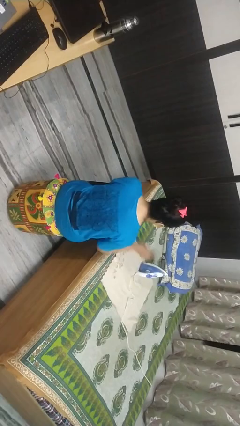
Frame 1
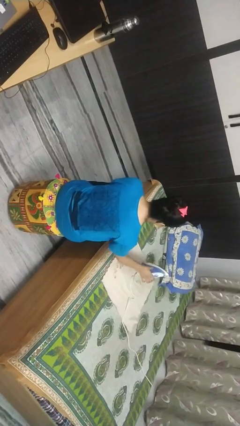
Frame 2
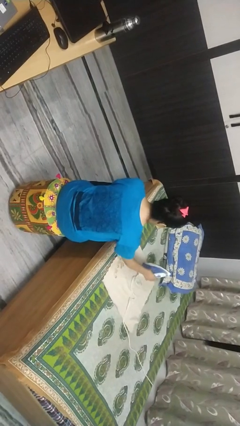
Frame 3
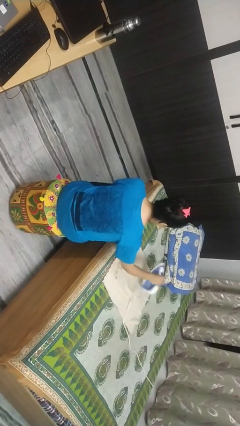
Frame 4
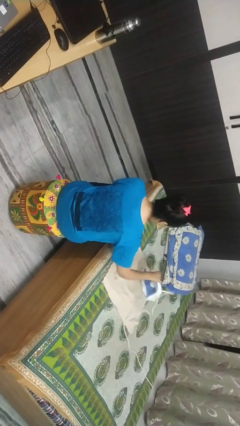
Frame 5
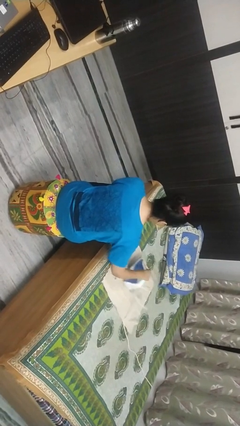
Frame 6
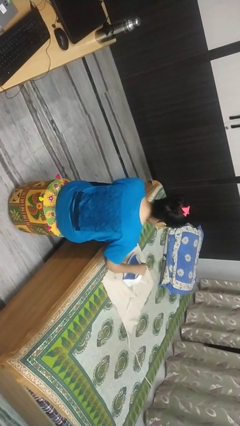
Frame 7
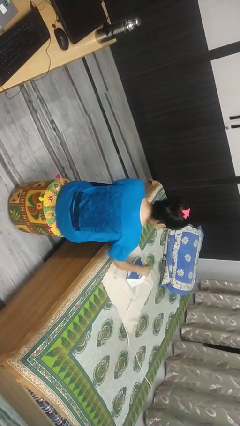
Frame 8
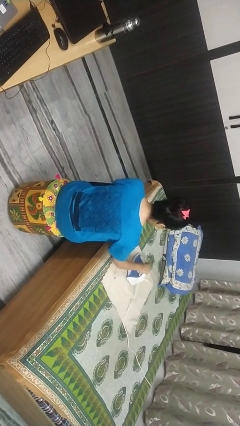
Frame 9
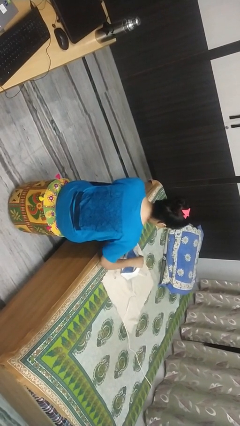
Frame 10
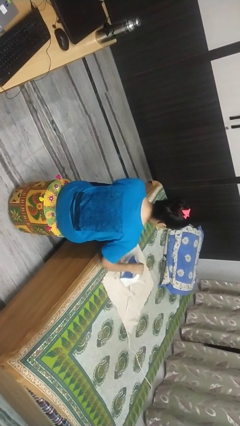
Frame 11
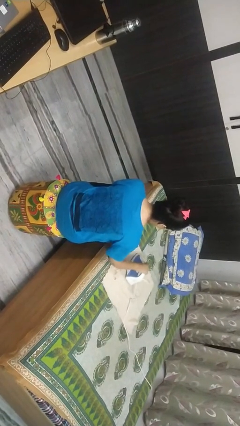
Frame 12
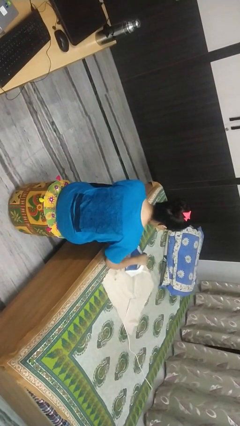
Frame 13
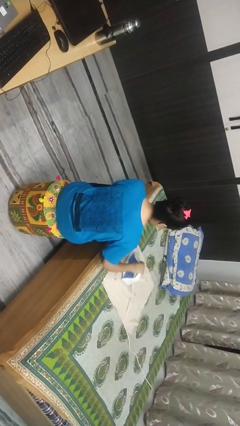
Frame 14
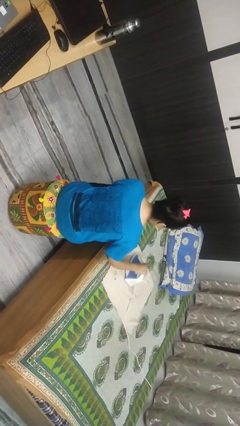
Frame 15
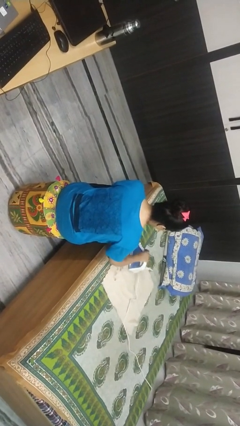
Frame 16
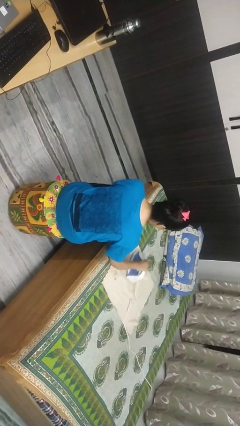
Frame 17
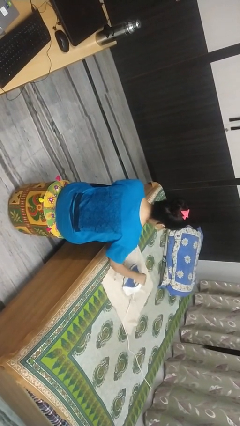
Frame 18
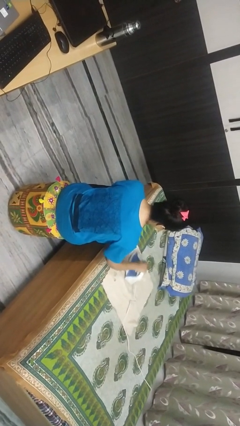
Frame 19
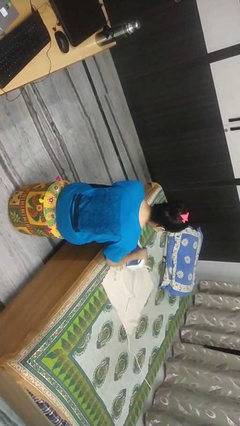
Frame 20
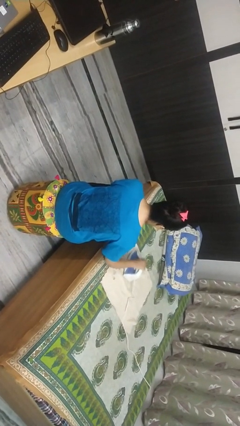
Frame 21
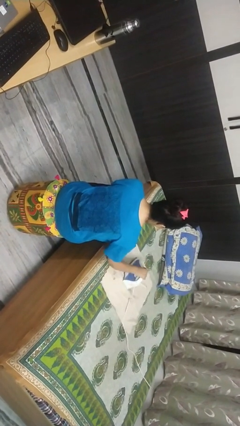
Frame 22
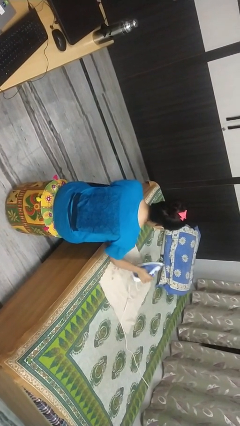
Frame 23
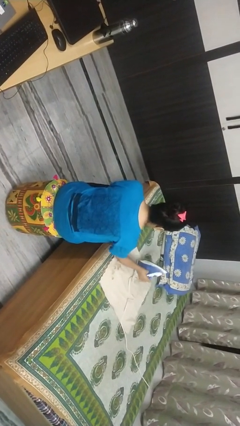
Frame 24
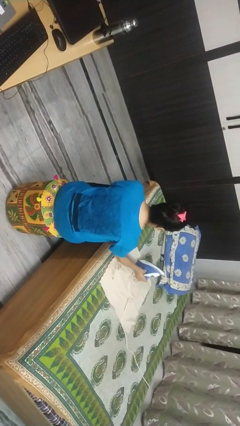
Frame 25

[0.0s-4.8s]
person irons clothes

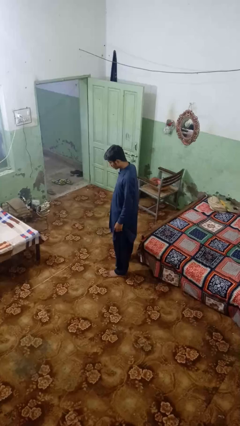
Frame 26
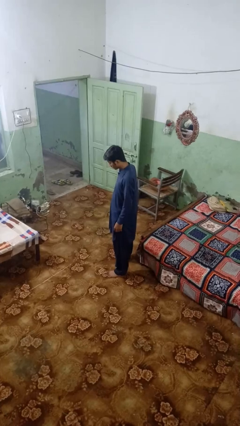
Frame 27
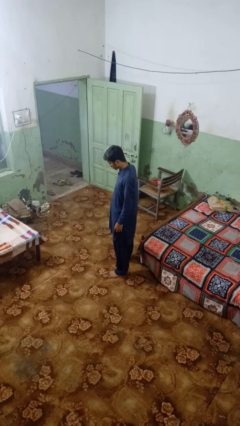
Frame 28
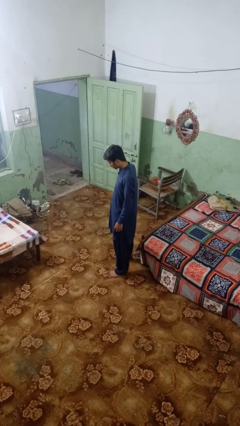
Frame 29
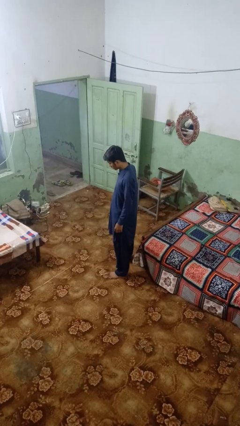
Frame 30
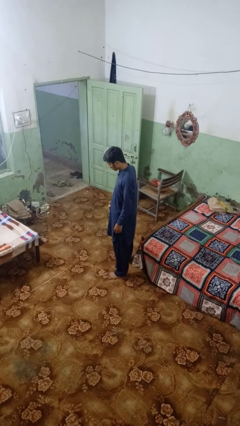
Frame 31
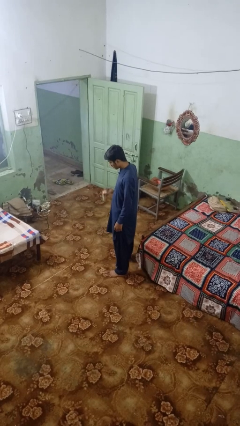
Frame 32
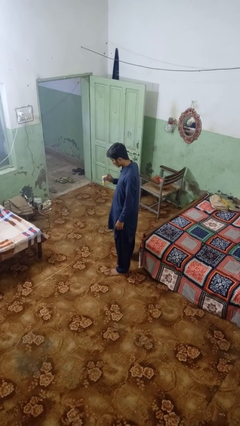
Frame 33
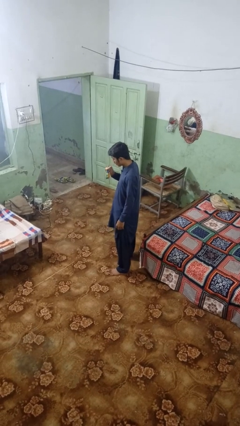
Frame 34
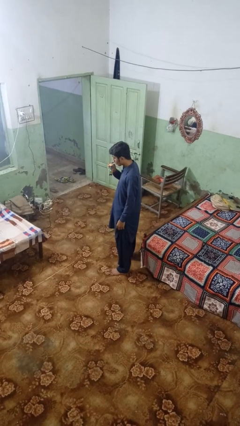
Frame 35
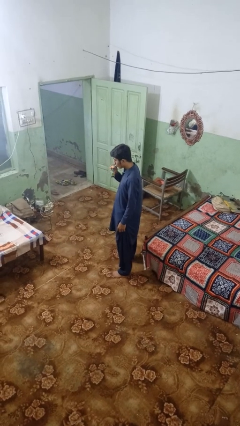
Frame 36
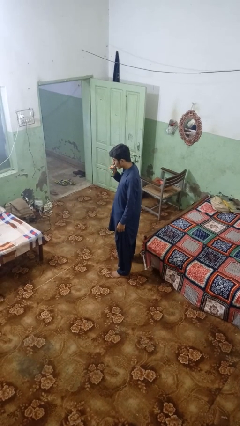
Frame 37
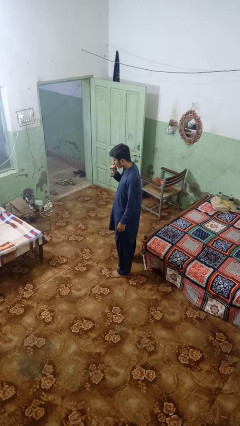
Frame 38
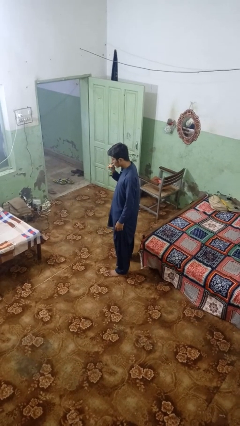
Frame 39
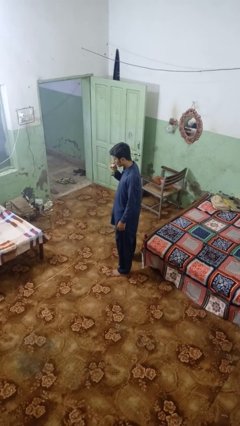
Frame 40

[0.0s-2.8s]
person drinks from straw

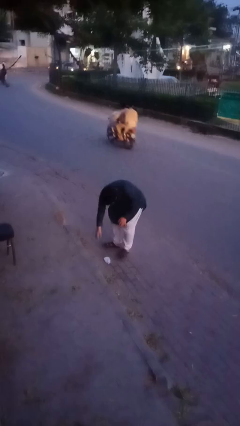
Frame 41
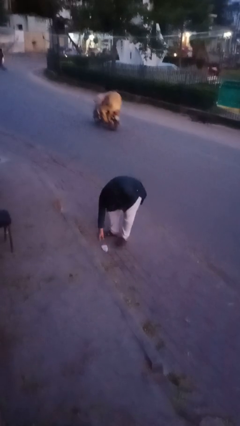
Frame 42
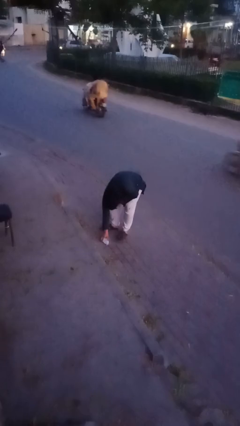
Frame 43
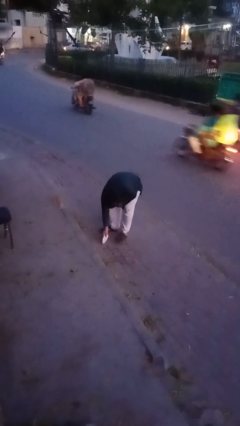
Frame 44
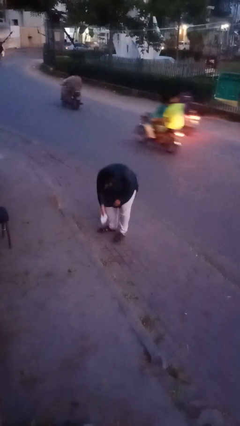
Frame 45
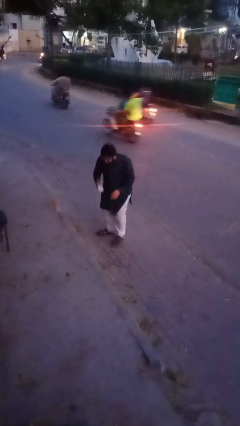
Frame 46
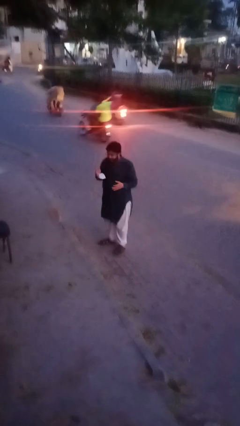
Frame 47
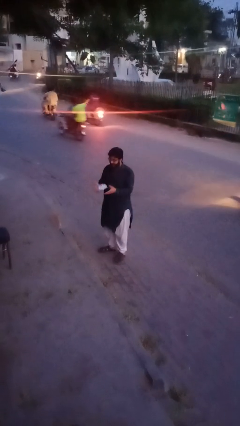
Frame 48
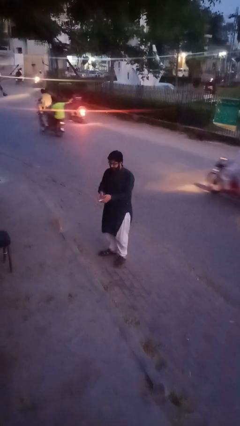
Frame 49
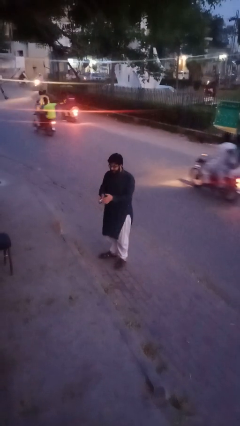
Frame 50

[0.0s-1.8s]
person picks up object from floor

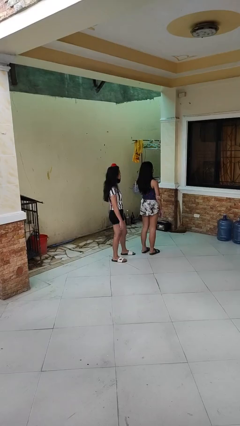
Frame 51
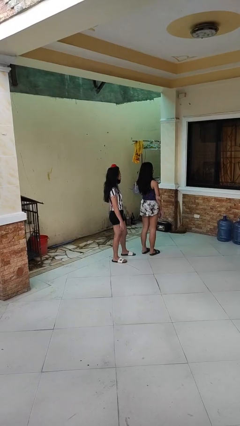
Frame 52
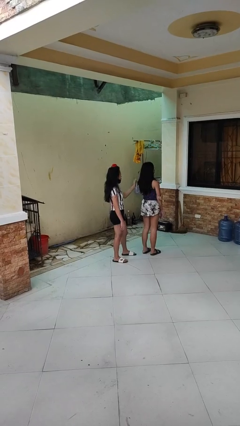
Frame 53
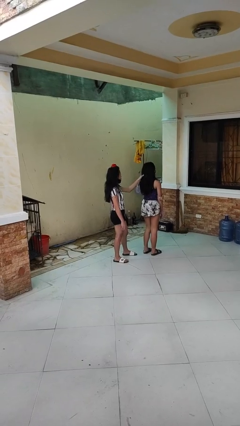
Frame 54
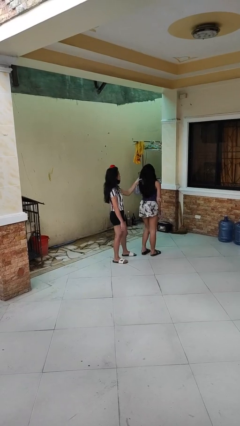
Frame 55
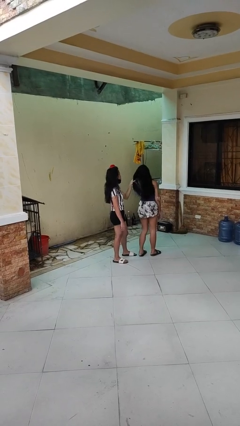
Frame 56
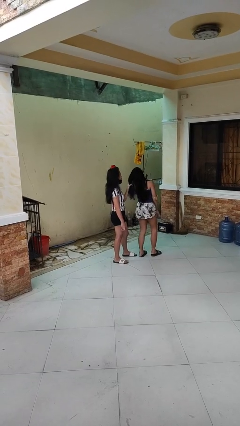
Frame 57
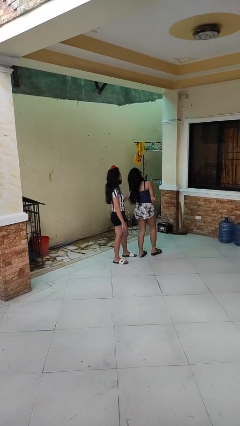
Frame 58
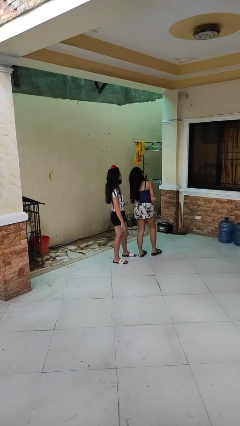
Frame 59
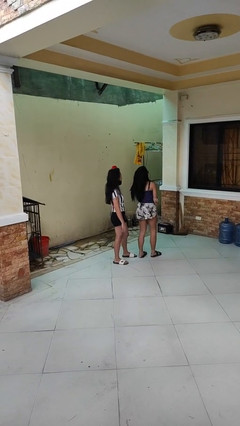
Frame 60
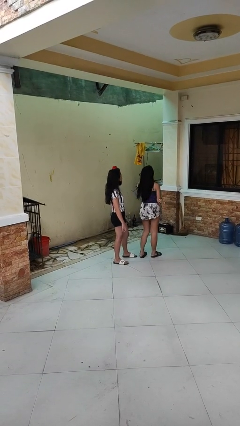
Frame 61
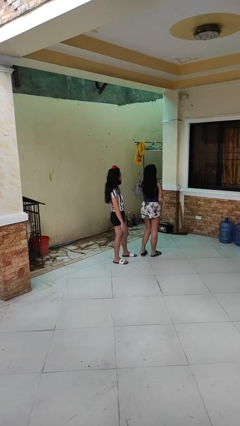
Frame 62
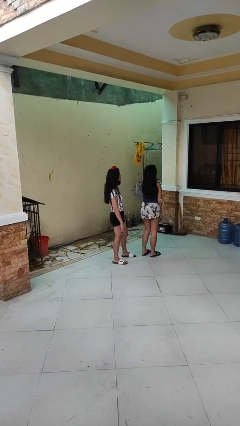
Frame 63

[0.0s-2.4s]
person grabs person by hair

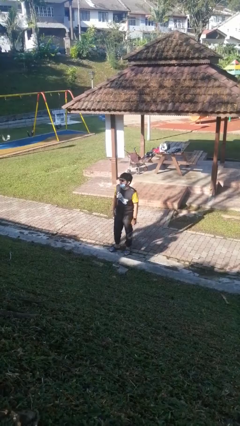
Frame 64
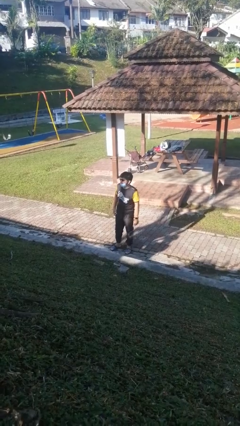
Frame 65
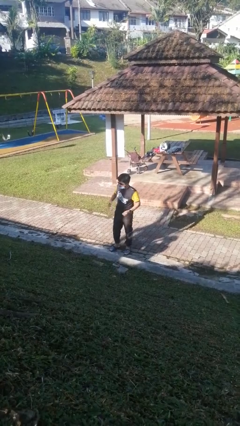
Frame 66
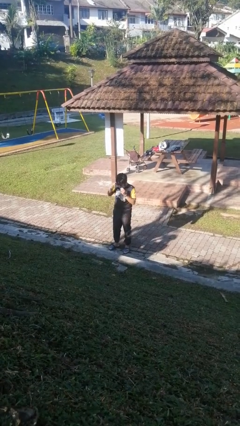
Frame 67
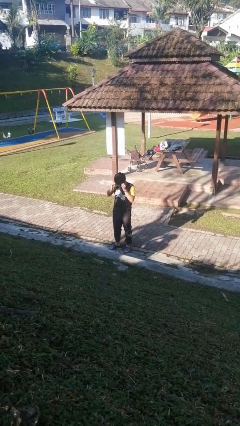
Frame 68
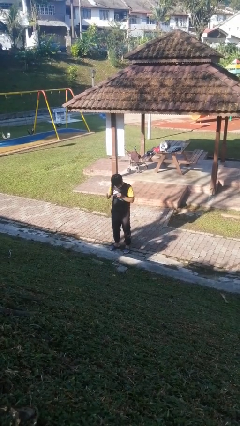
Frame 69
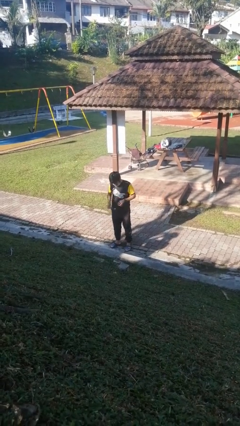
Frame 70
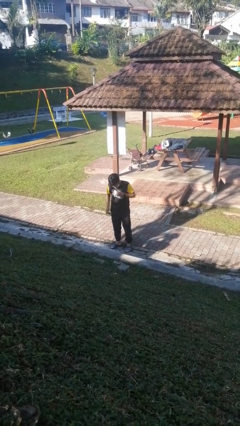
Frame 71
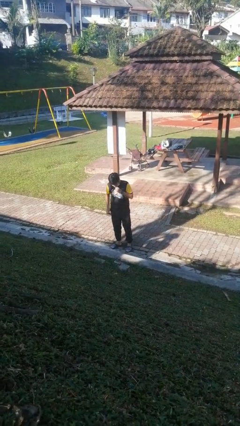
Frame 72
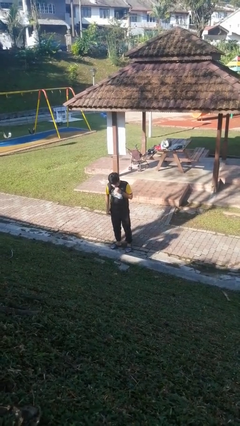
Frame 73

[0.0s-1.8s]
person takes off sunglasses

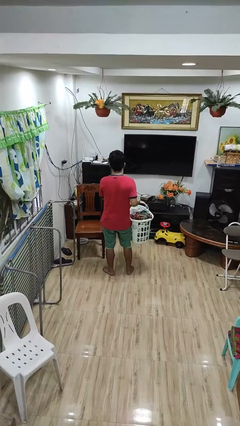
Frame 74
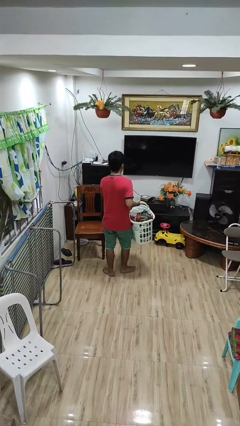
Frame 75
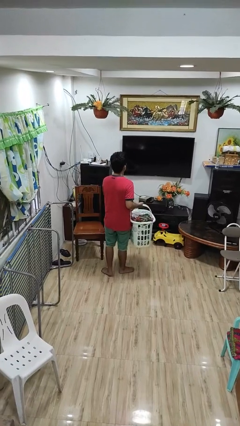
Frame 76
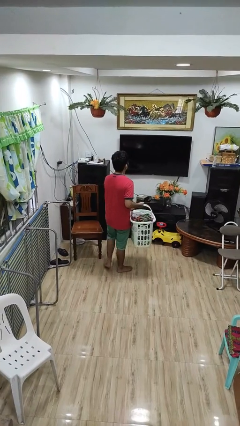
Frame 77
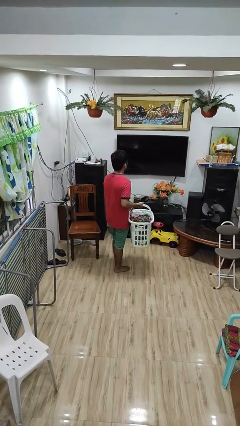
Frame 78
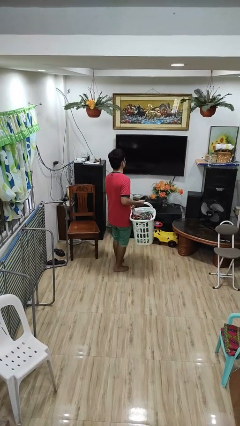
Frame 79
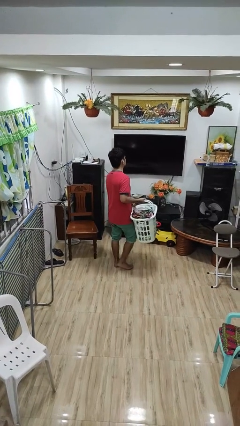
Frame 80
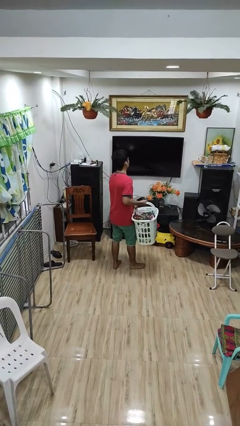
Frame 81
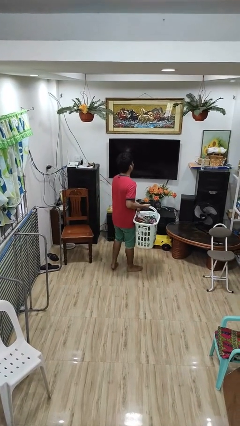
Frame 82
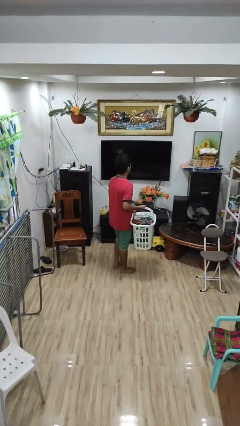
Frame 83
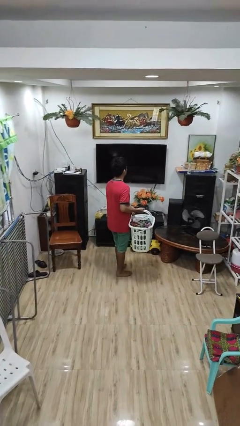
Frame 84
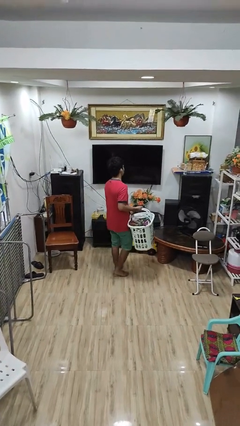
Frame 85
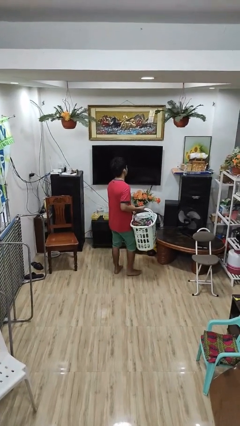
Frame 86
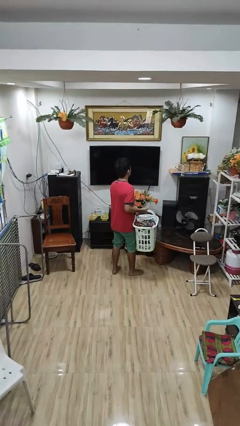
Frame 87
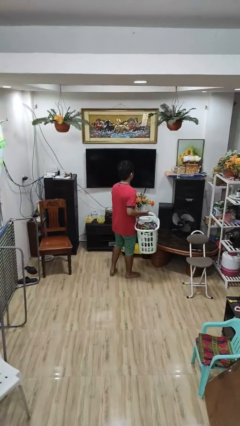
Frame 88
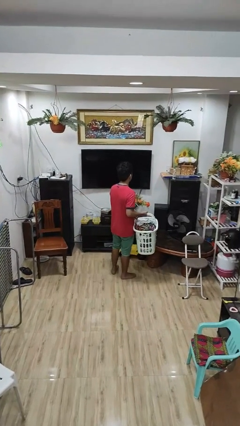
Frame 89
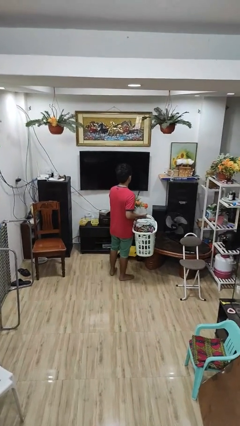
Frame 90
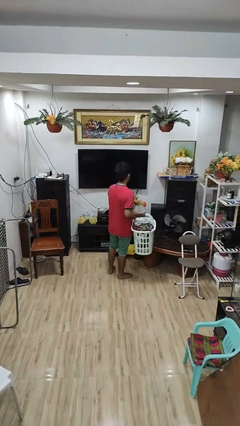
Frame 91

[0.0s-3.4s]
person carries laundry basket

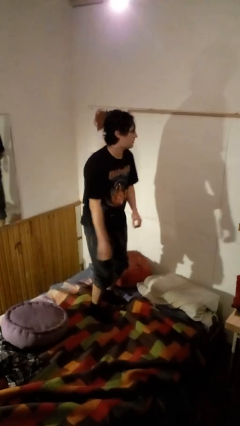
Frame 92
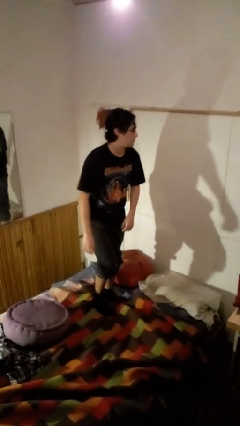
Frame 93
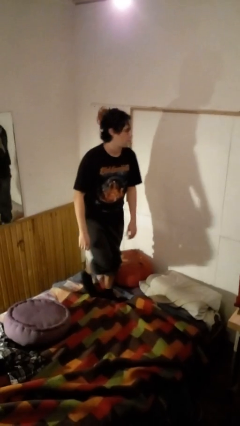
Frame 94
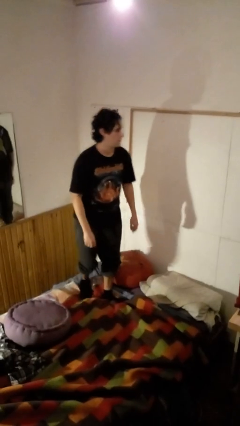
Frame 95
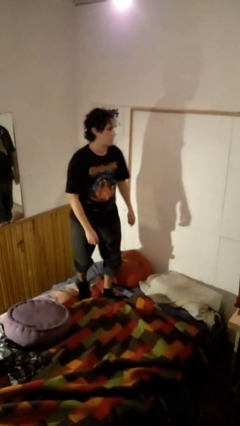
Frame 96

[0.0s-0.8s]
person jumps on bed
